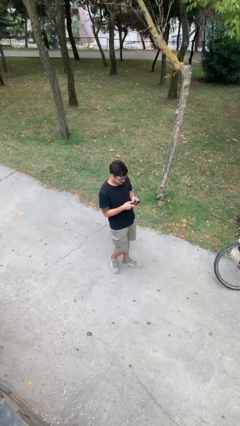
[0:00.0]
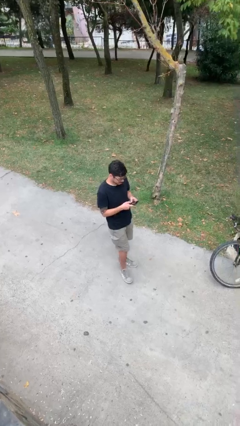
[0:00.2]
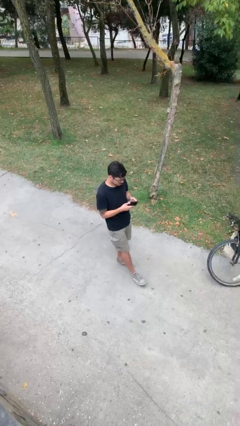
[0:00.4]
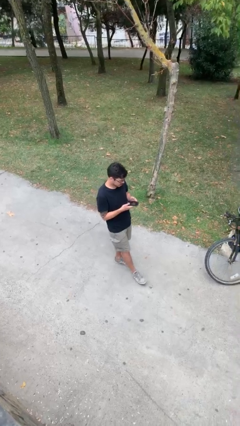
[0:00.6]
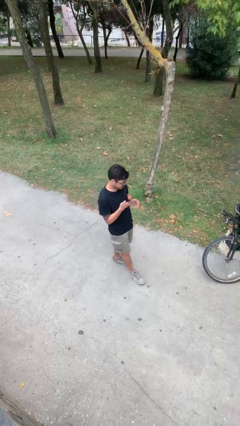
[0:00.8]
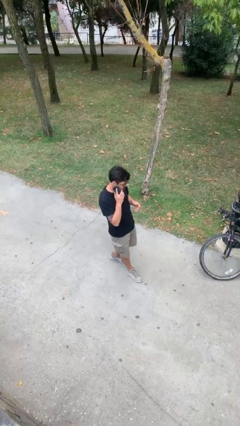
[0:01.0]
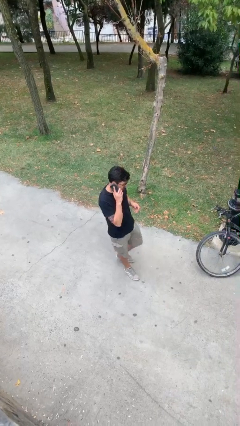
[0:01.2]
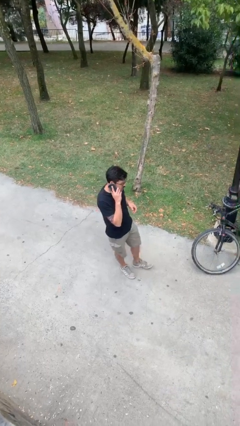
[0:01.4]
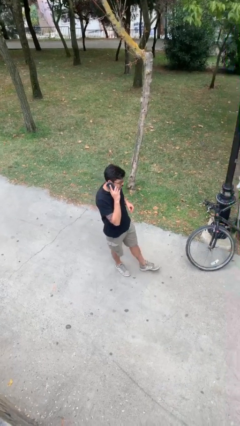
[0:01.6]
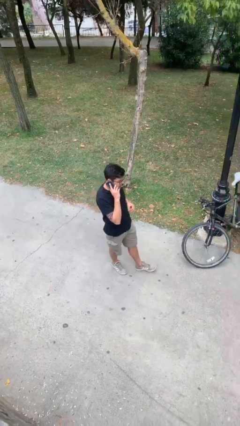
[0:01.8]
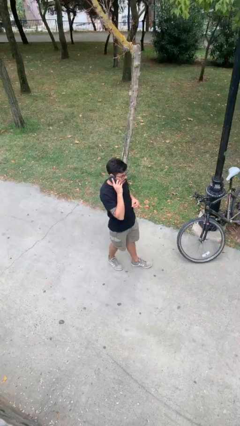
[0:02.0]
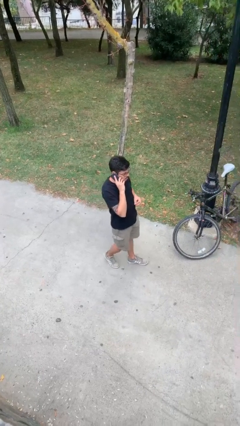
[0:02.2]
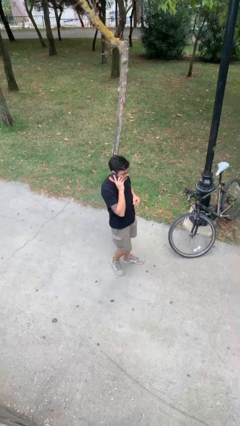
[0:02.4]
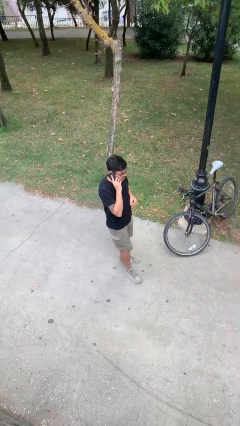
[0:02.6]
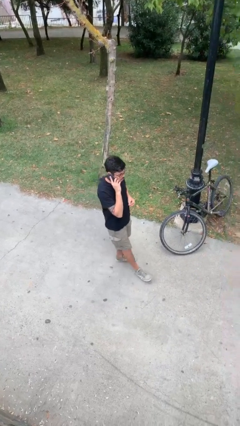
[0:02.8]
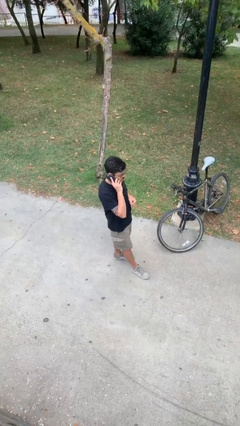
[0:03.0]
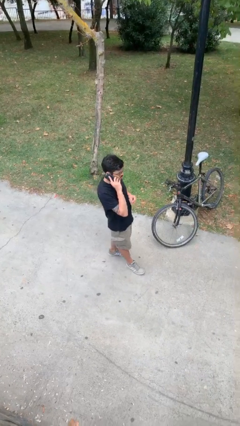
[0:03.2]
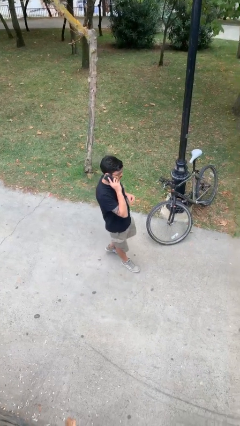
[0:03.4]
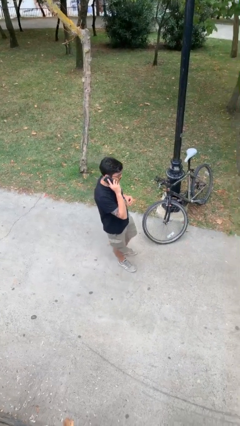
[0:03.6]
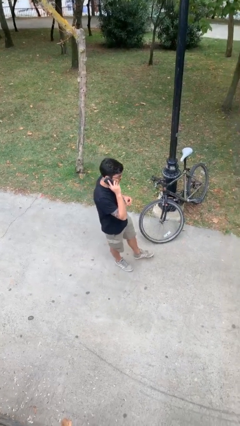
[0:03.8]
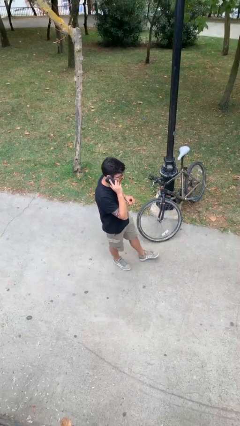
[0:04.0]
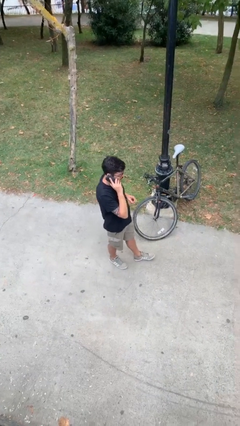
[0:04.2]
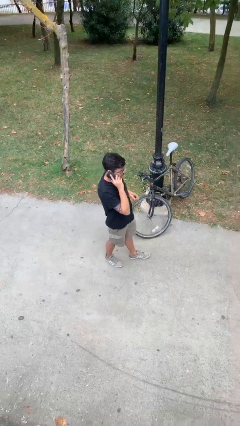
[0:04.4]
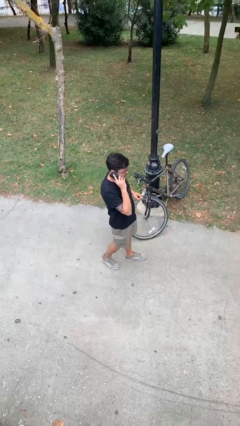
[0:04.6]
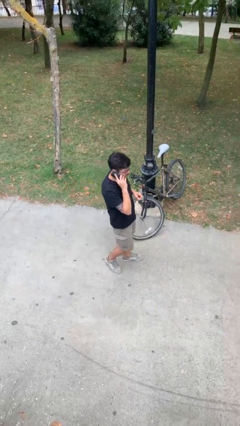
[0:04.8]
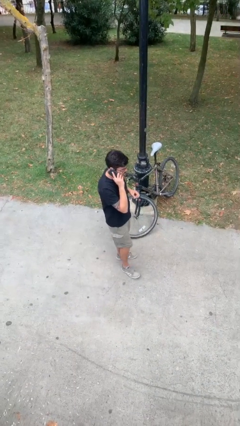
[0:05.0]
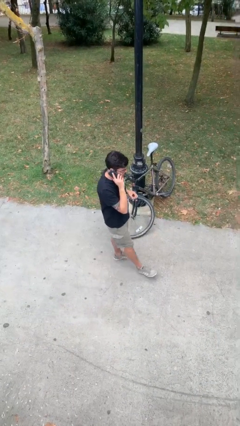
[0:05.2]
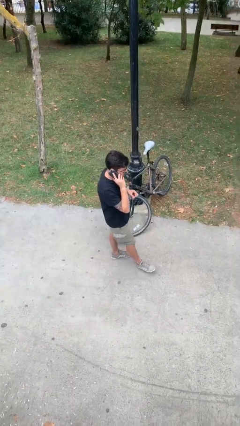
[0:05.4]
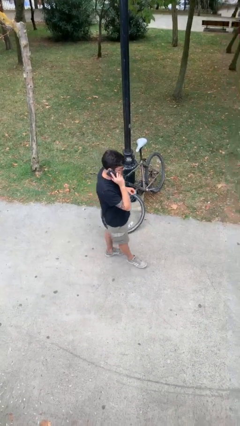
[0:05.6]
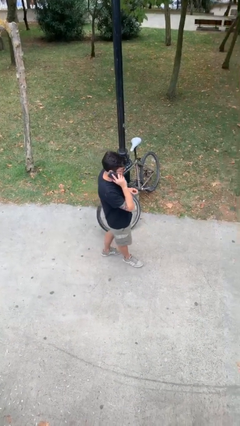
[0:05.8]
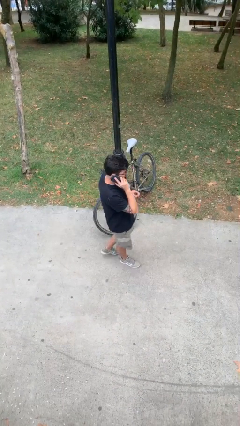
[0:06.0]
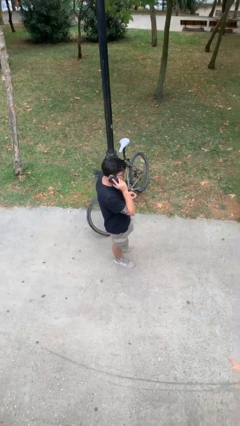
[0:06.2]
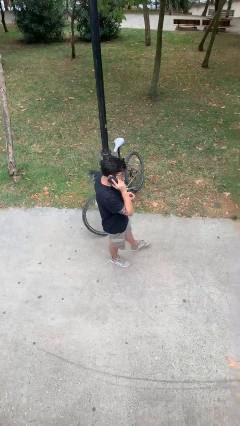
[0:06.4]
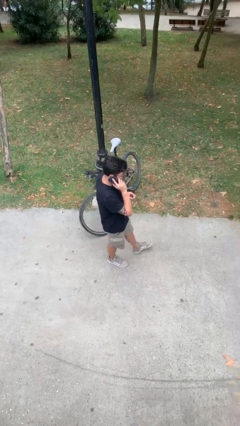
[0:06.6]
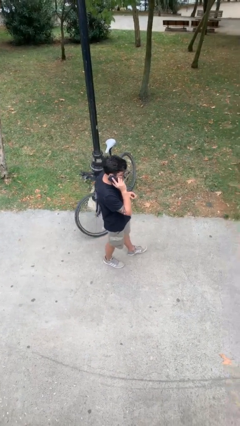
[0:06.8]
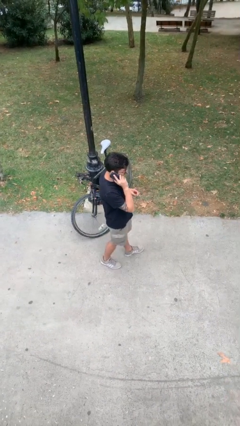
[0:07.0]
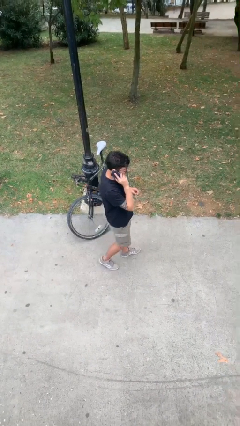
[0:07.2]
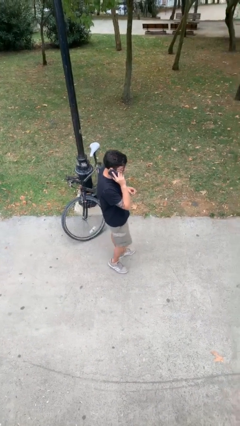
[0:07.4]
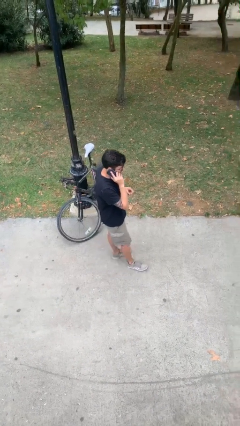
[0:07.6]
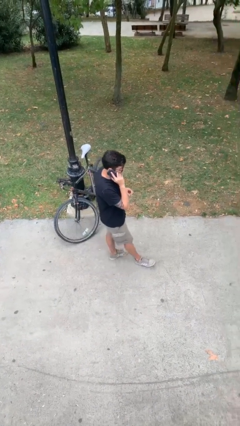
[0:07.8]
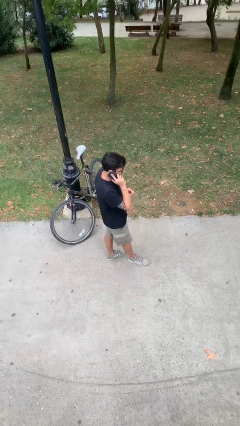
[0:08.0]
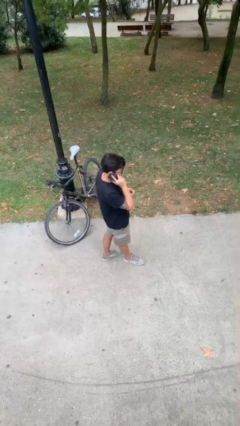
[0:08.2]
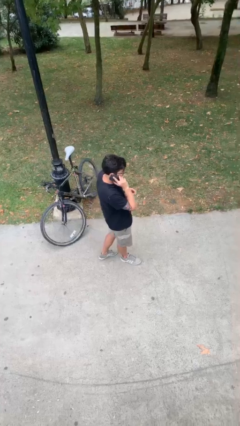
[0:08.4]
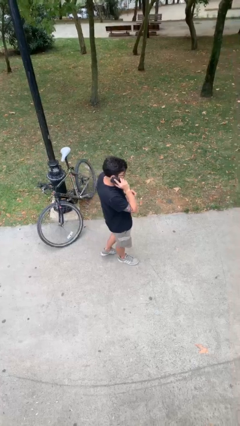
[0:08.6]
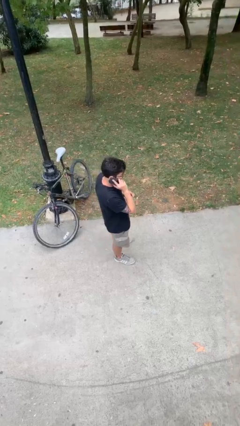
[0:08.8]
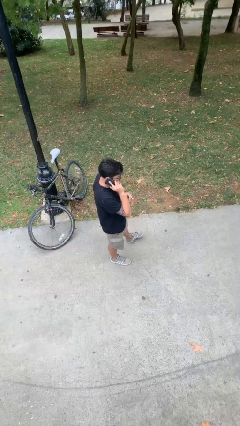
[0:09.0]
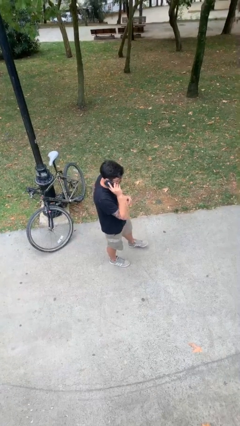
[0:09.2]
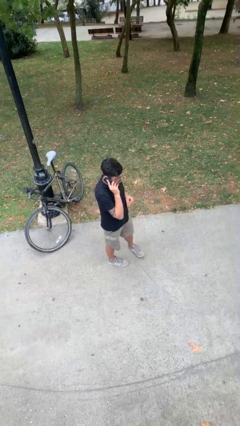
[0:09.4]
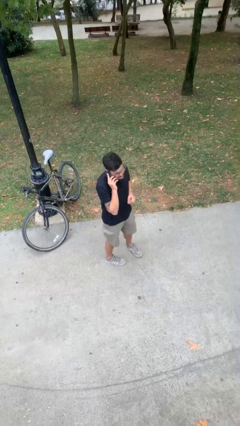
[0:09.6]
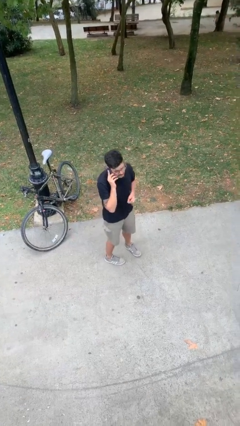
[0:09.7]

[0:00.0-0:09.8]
person talks on phone

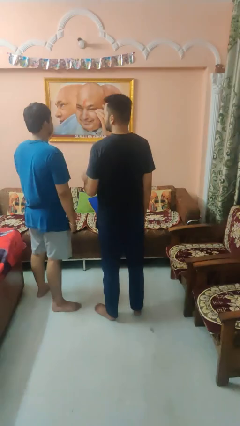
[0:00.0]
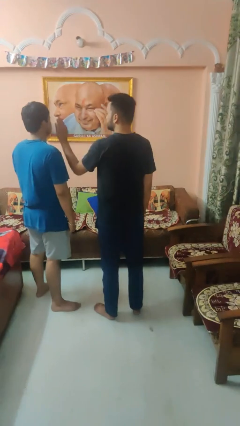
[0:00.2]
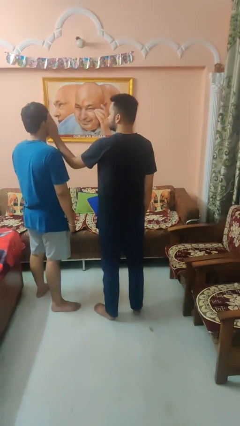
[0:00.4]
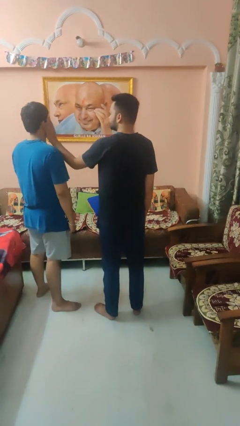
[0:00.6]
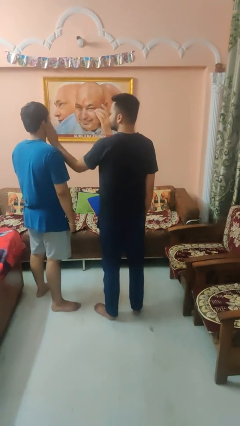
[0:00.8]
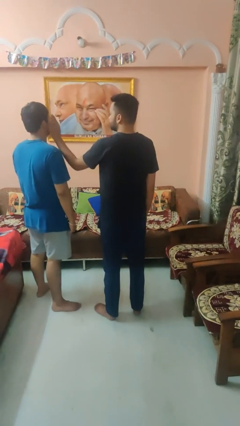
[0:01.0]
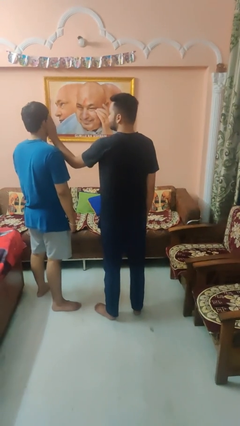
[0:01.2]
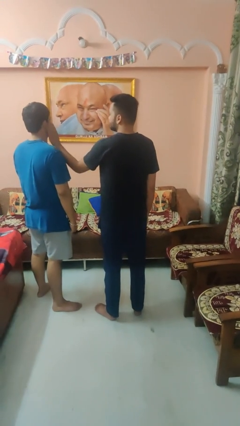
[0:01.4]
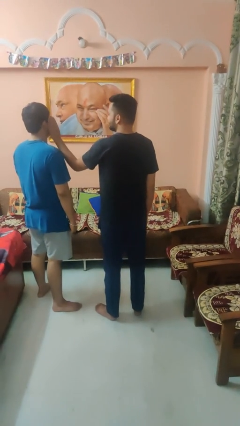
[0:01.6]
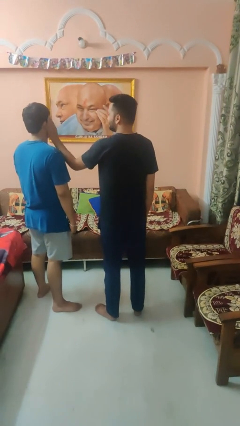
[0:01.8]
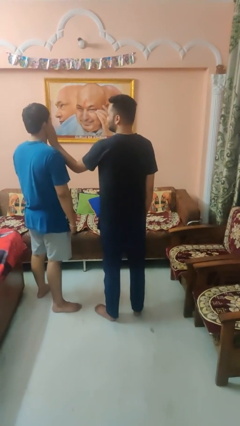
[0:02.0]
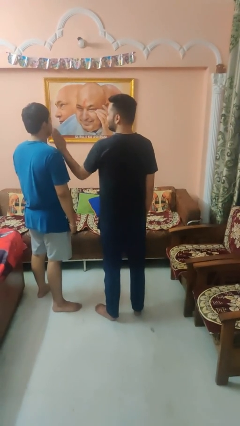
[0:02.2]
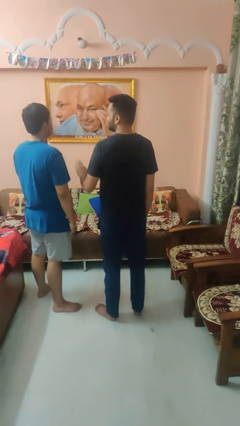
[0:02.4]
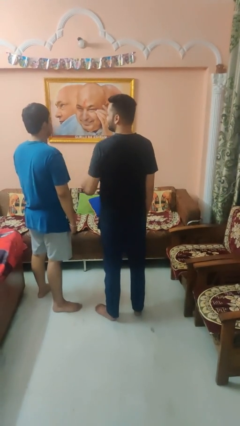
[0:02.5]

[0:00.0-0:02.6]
person touches face of person

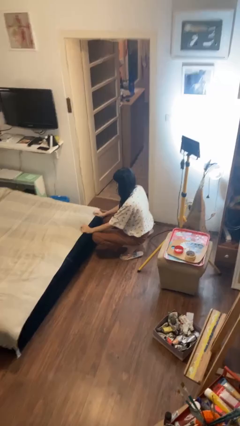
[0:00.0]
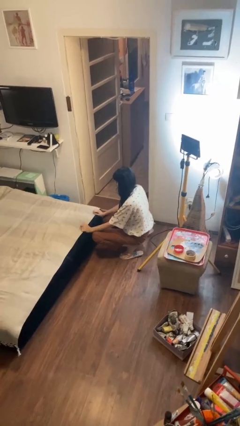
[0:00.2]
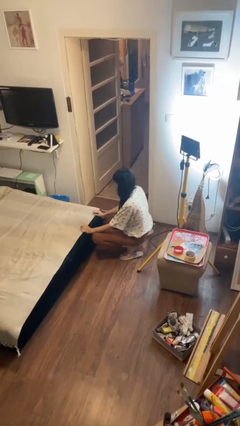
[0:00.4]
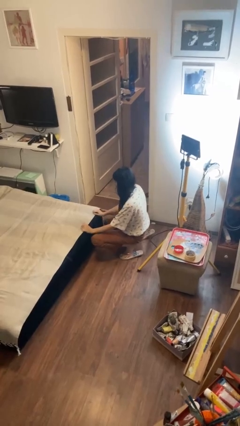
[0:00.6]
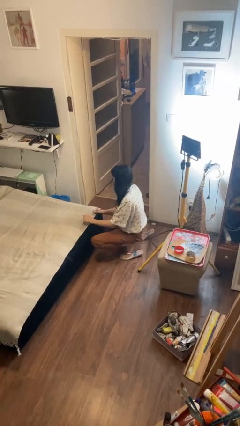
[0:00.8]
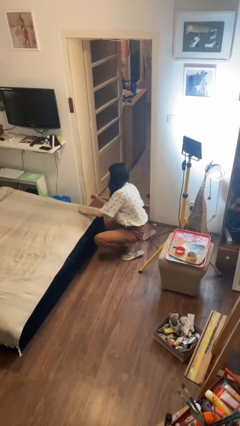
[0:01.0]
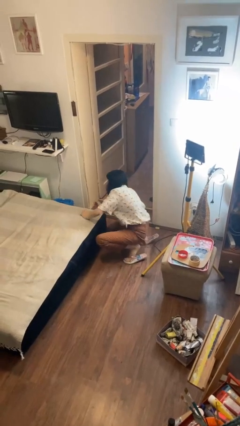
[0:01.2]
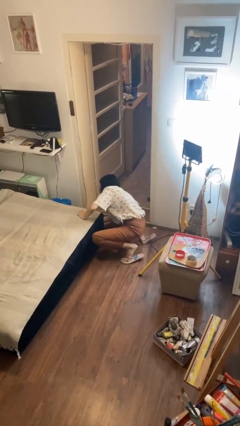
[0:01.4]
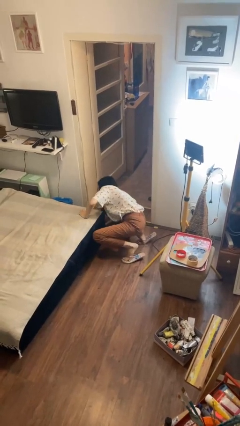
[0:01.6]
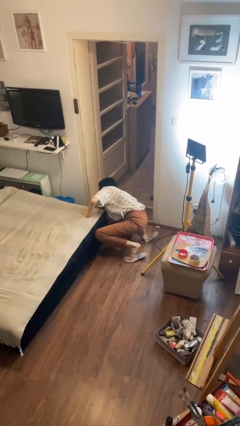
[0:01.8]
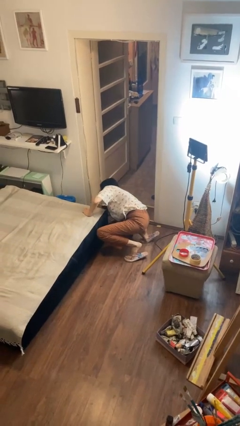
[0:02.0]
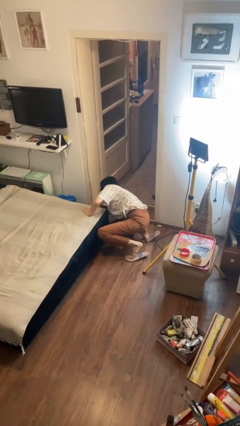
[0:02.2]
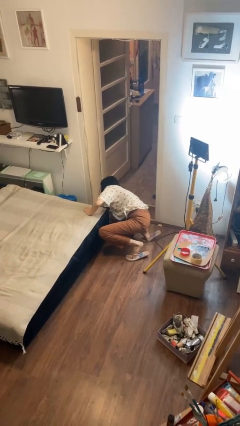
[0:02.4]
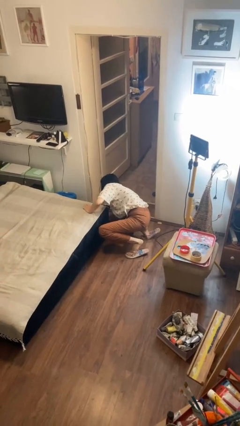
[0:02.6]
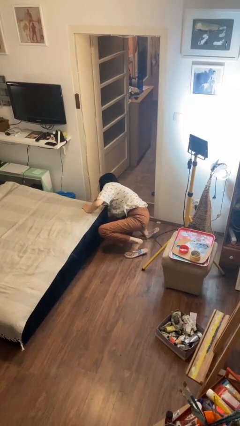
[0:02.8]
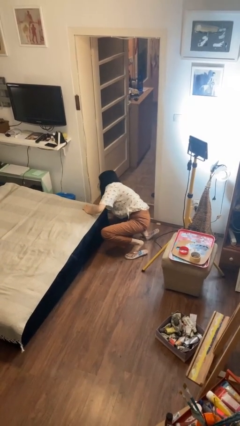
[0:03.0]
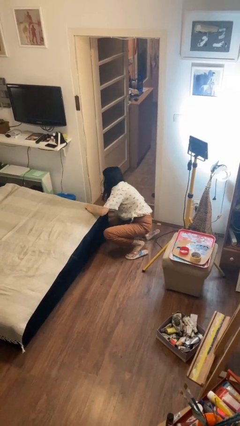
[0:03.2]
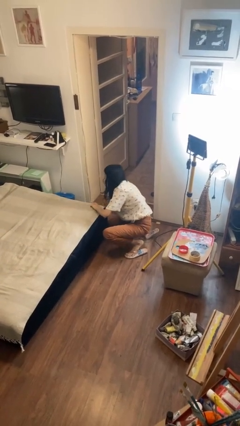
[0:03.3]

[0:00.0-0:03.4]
person searches under bed

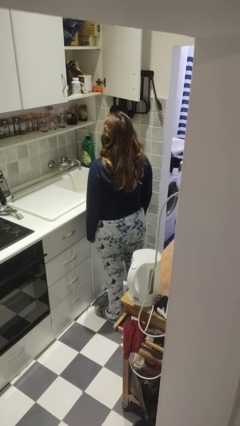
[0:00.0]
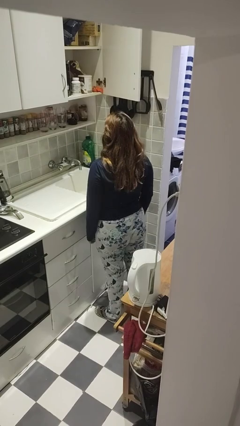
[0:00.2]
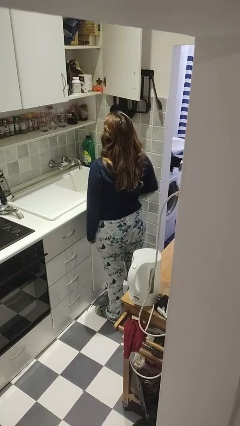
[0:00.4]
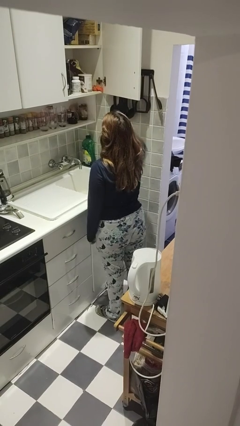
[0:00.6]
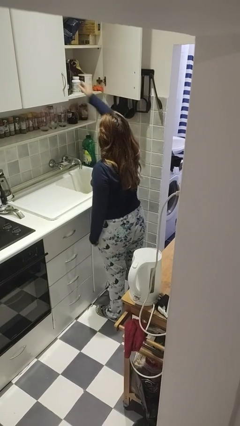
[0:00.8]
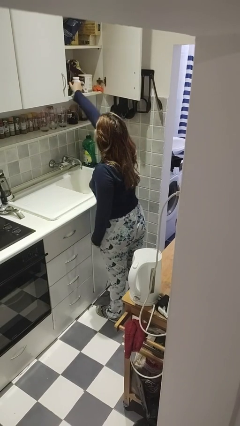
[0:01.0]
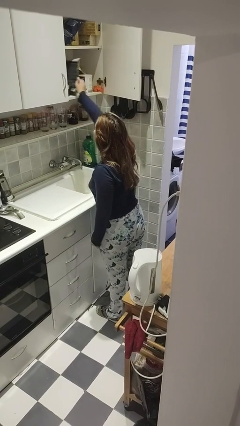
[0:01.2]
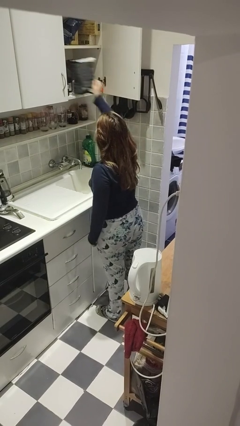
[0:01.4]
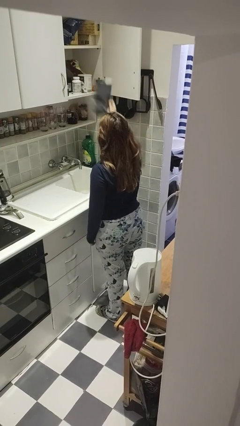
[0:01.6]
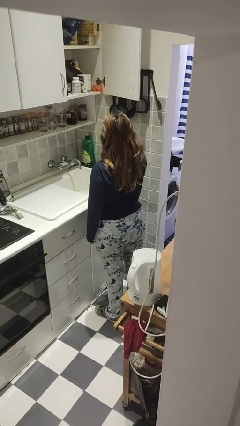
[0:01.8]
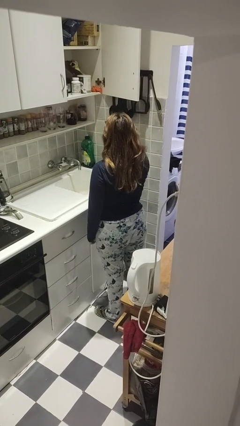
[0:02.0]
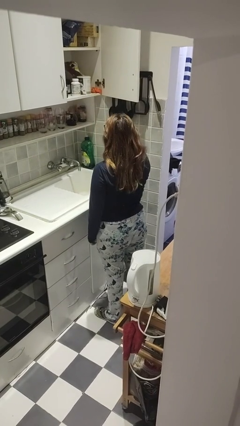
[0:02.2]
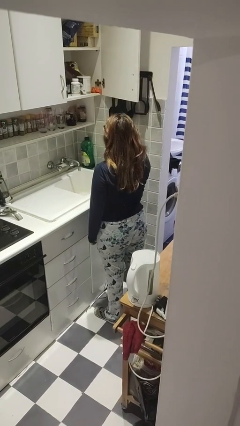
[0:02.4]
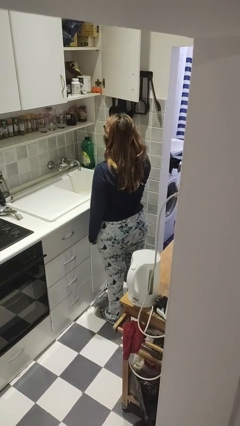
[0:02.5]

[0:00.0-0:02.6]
person takes object from cabinet
